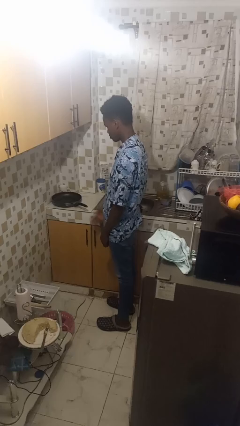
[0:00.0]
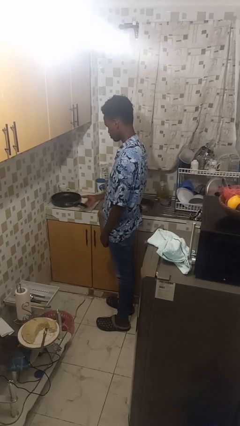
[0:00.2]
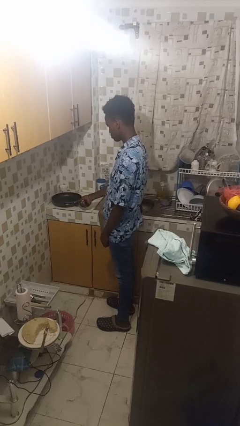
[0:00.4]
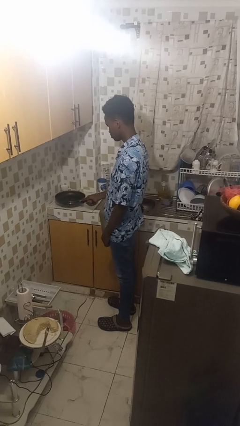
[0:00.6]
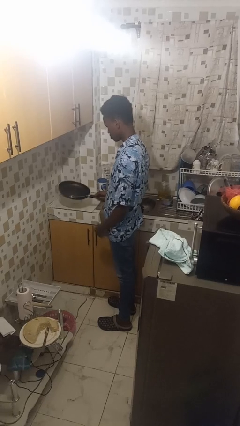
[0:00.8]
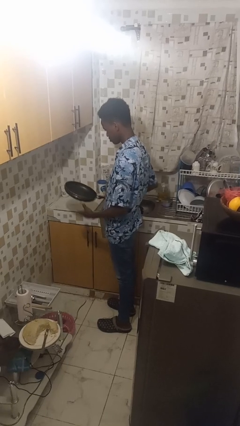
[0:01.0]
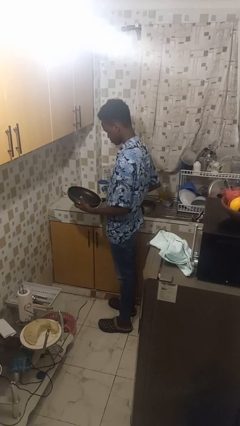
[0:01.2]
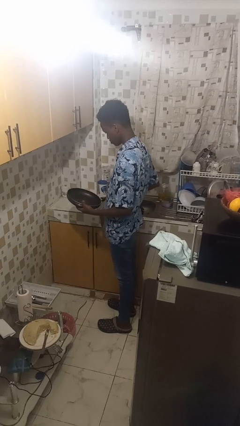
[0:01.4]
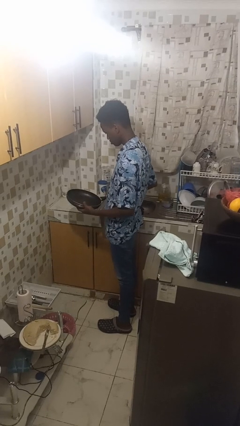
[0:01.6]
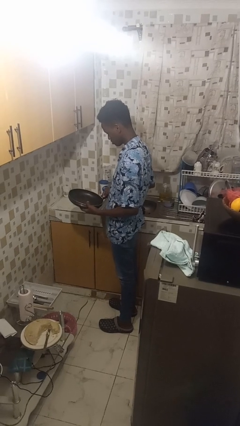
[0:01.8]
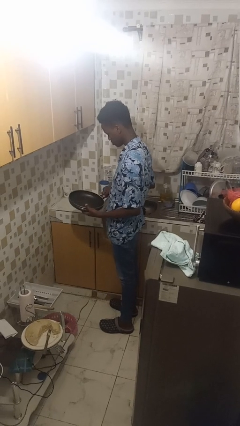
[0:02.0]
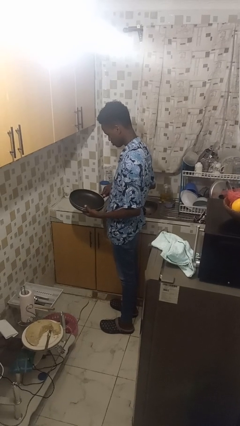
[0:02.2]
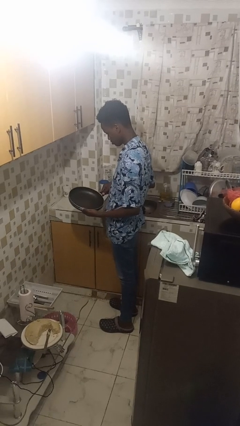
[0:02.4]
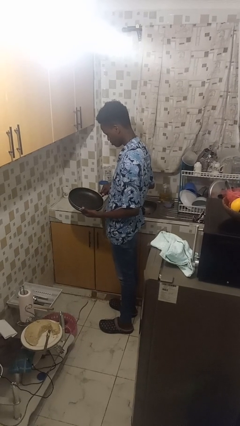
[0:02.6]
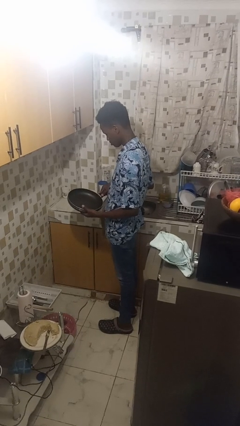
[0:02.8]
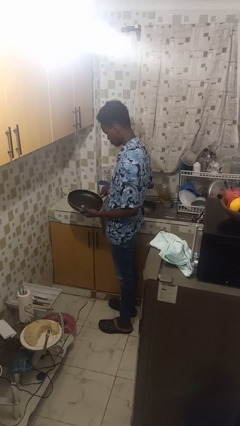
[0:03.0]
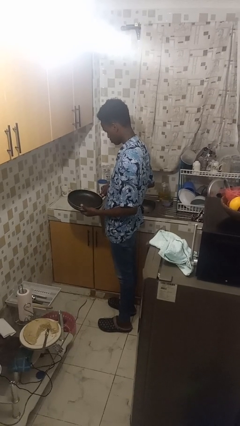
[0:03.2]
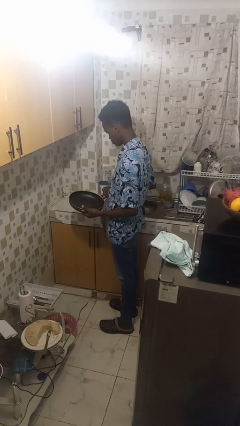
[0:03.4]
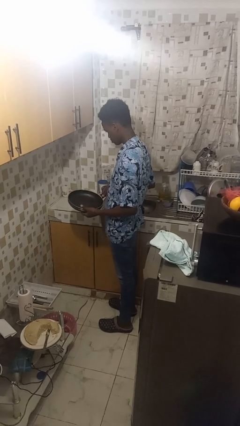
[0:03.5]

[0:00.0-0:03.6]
person picks up object from countertop

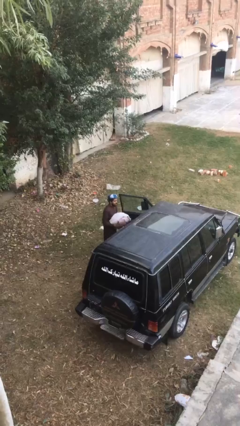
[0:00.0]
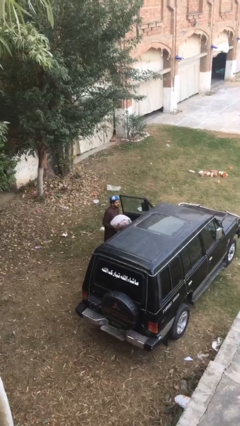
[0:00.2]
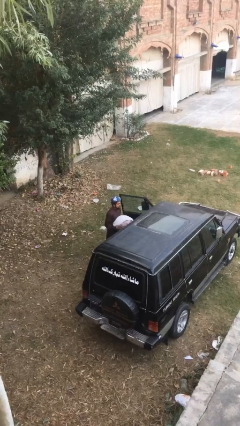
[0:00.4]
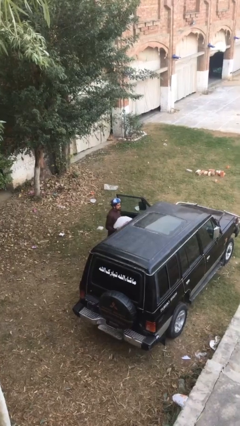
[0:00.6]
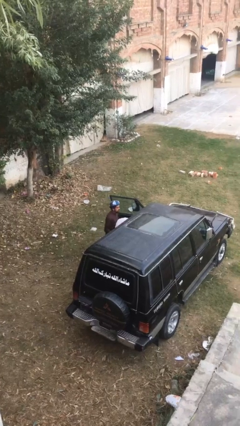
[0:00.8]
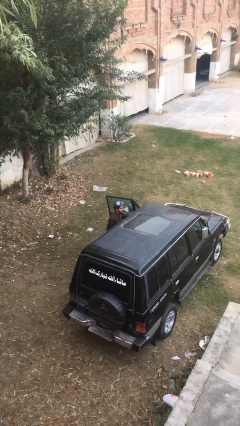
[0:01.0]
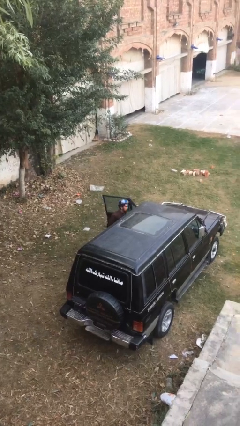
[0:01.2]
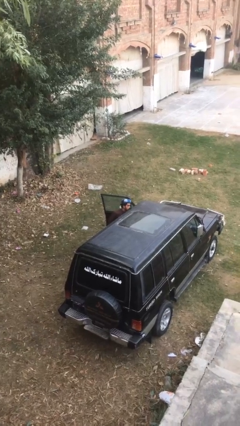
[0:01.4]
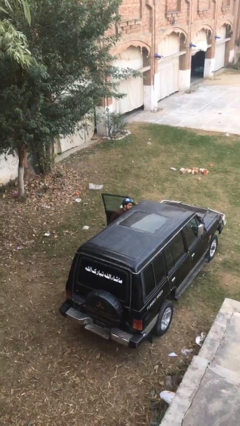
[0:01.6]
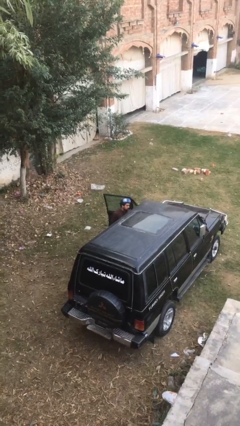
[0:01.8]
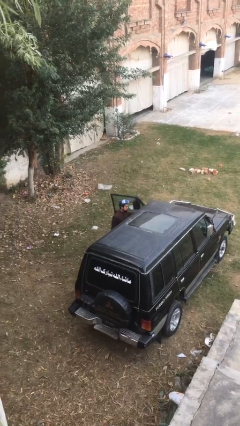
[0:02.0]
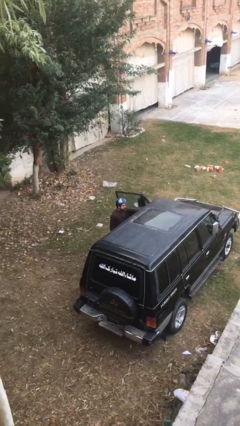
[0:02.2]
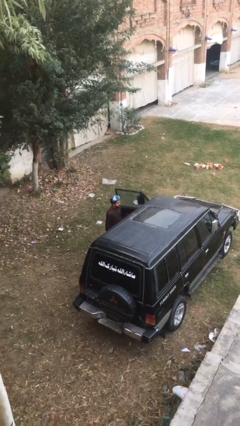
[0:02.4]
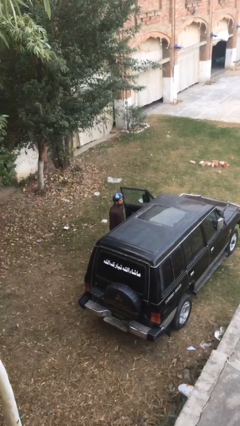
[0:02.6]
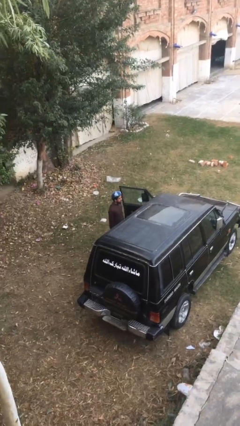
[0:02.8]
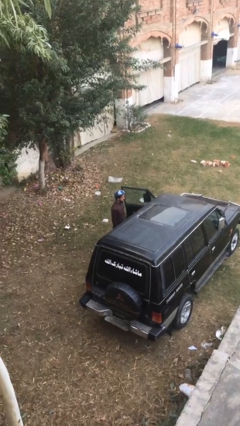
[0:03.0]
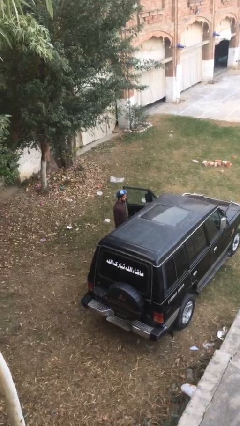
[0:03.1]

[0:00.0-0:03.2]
person loads car

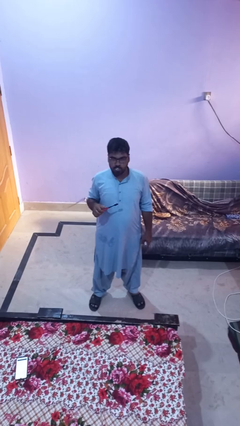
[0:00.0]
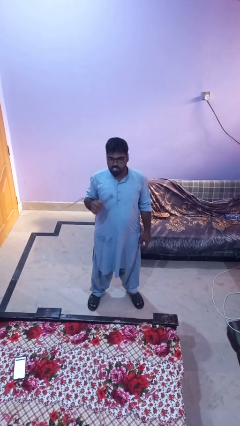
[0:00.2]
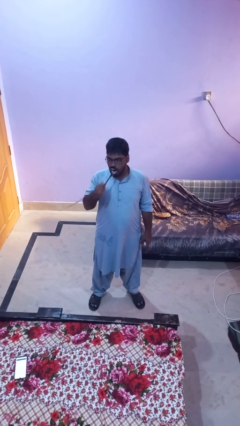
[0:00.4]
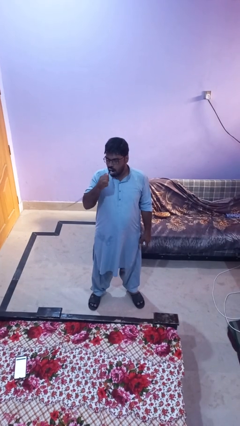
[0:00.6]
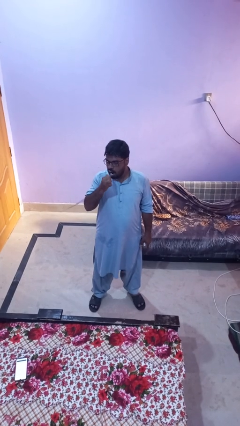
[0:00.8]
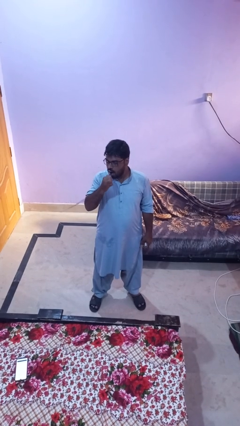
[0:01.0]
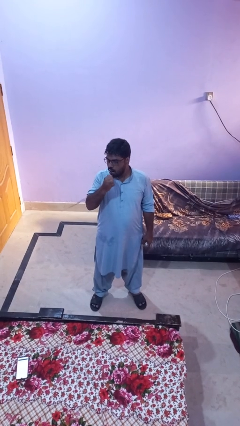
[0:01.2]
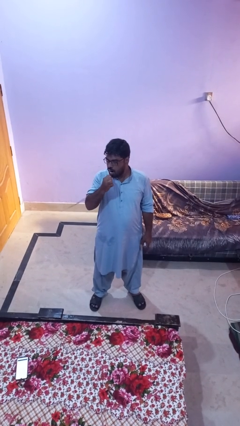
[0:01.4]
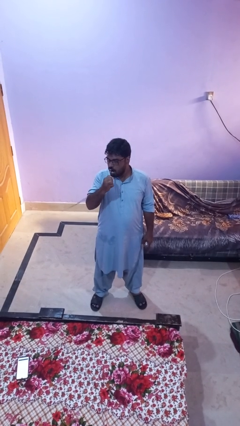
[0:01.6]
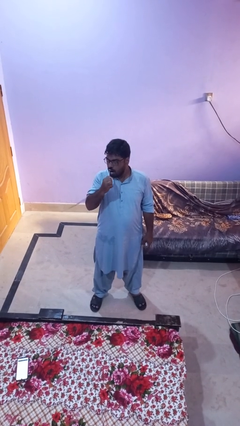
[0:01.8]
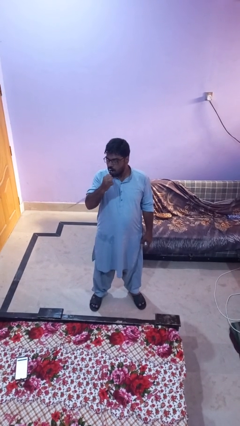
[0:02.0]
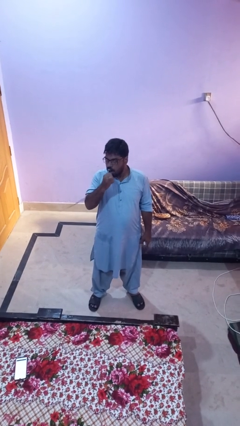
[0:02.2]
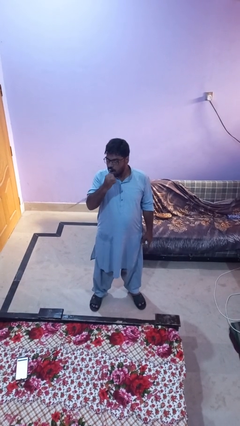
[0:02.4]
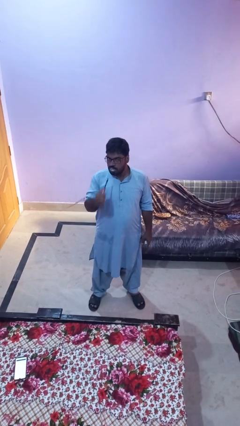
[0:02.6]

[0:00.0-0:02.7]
person brushes teeth

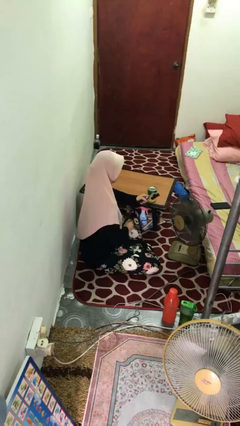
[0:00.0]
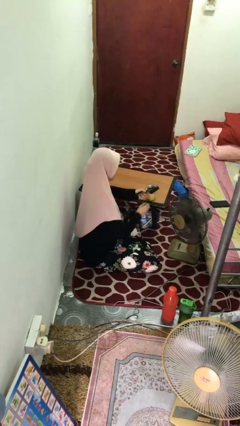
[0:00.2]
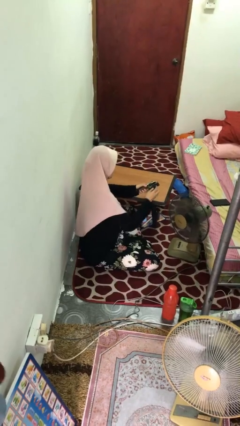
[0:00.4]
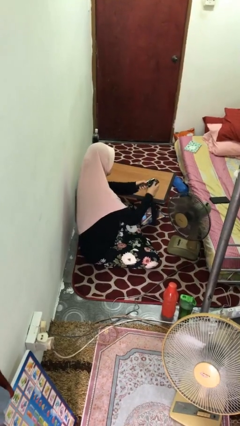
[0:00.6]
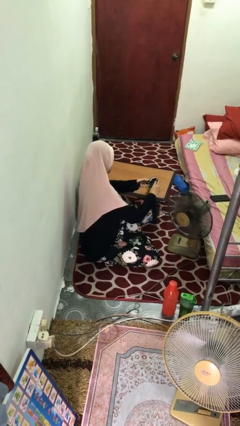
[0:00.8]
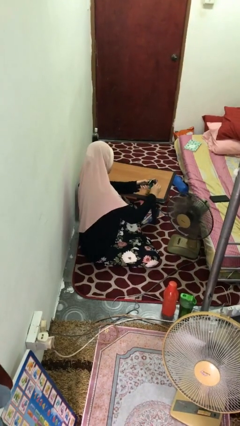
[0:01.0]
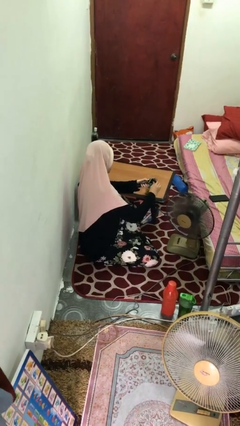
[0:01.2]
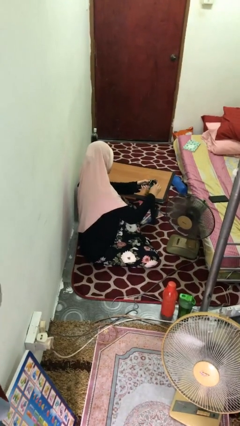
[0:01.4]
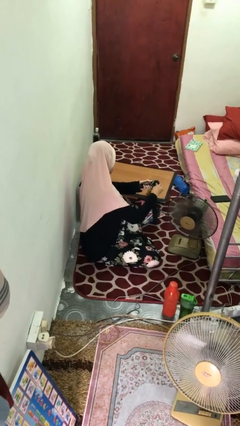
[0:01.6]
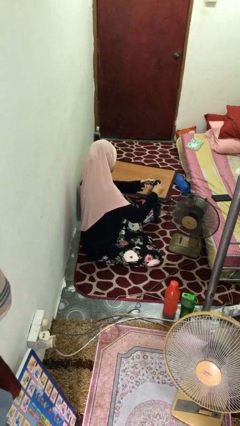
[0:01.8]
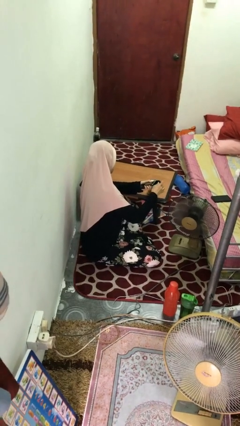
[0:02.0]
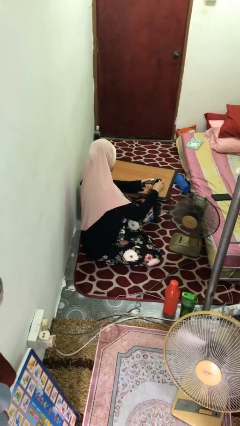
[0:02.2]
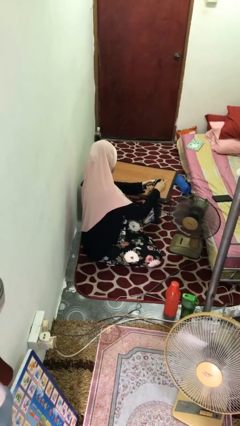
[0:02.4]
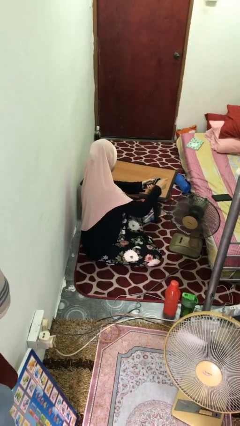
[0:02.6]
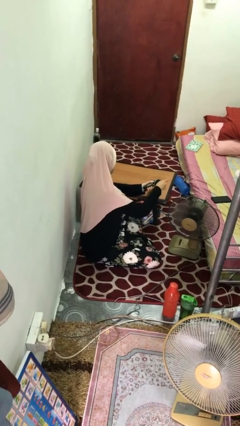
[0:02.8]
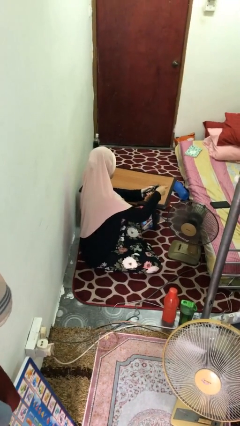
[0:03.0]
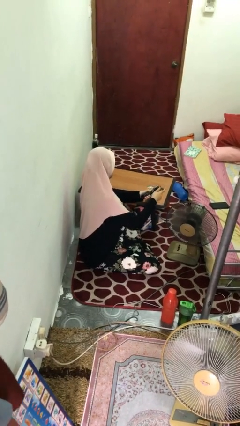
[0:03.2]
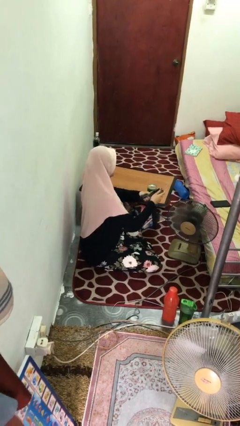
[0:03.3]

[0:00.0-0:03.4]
person opens can with can opener

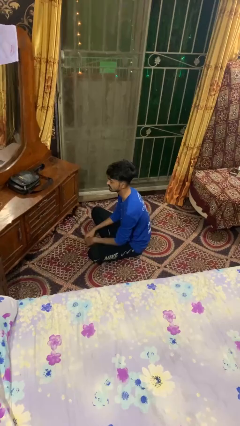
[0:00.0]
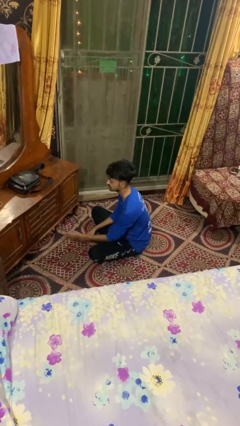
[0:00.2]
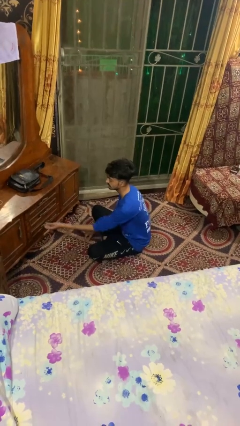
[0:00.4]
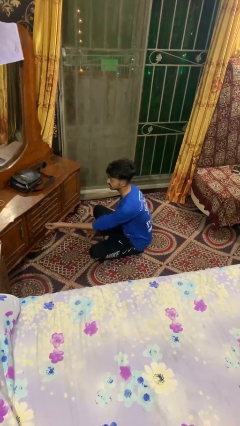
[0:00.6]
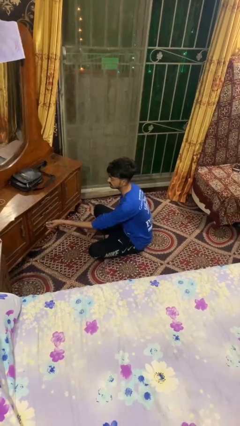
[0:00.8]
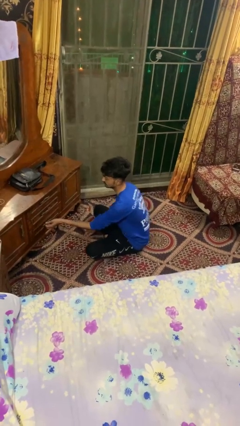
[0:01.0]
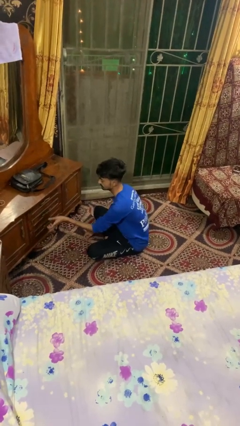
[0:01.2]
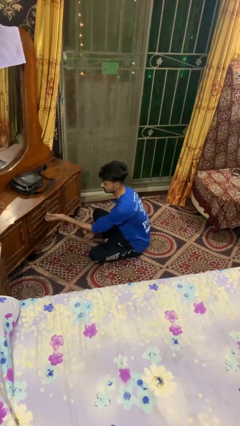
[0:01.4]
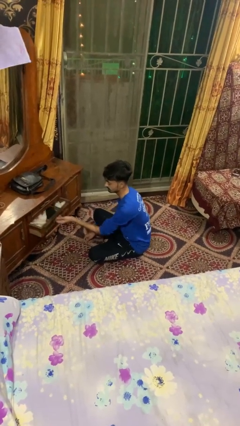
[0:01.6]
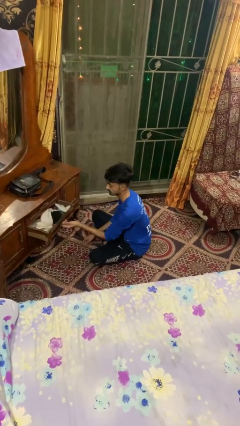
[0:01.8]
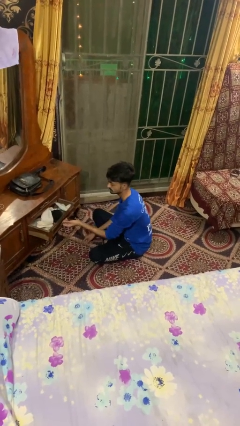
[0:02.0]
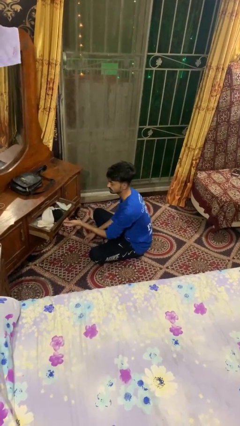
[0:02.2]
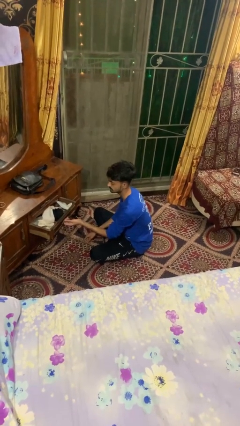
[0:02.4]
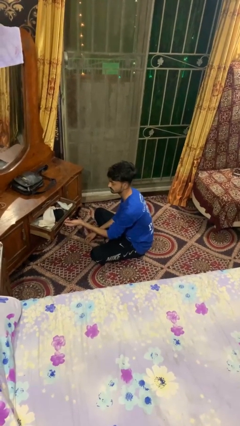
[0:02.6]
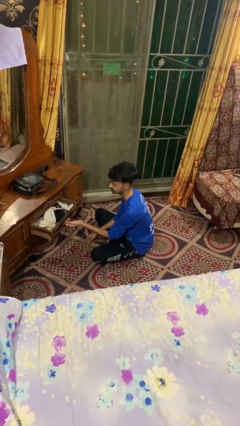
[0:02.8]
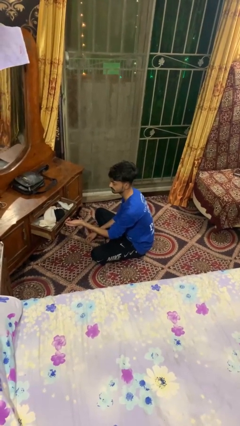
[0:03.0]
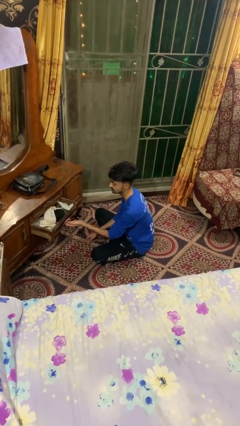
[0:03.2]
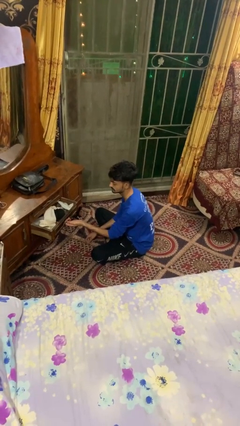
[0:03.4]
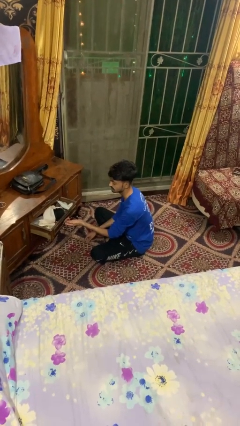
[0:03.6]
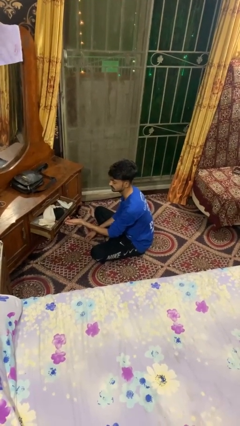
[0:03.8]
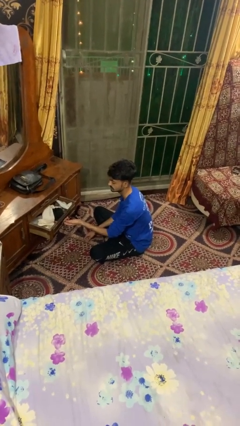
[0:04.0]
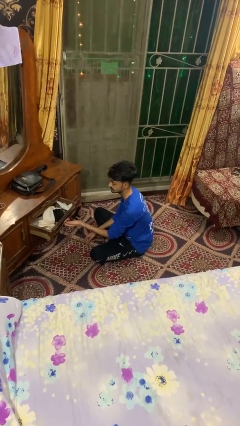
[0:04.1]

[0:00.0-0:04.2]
person opens dresser drawer

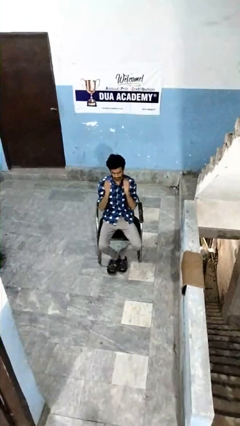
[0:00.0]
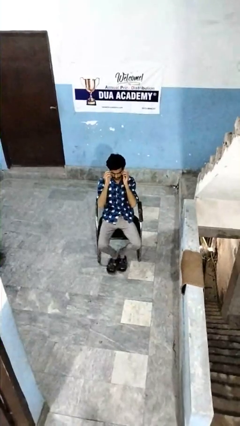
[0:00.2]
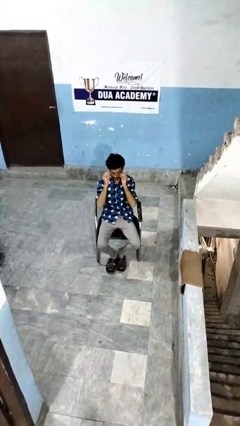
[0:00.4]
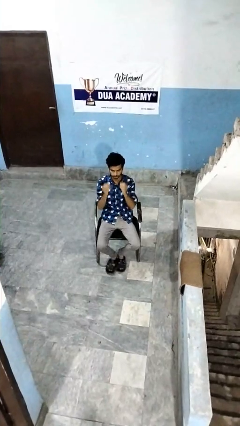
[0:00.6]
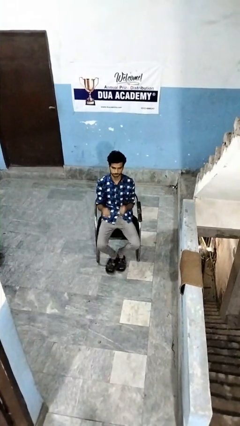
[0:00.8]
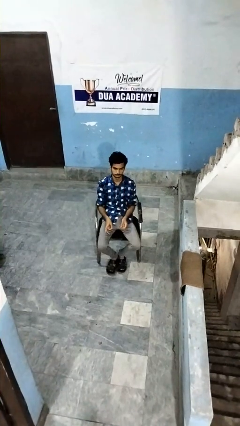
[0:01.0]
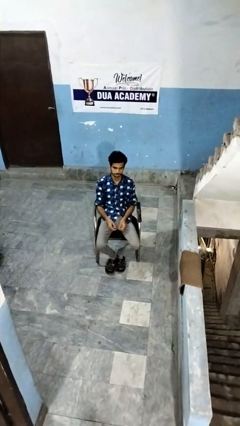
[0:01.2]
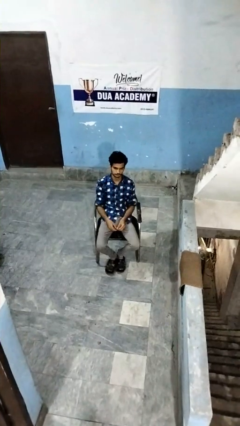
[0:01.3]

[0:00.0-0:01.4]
person takes off glasses
